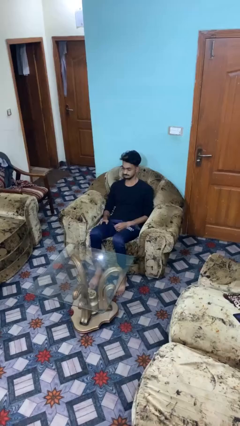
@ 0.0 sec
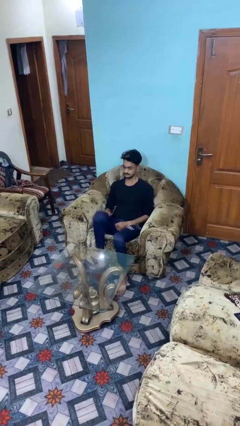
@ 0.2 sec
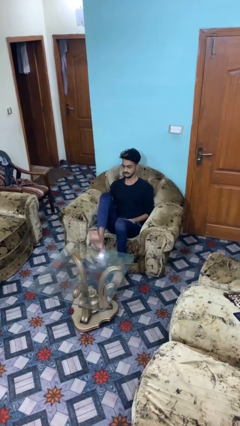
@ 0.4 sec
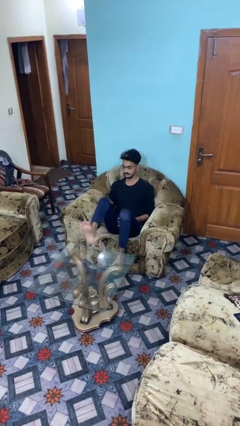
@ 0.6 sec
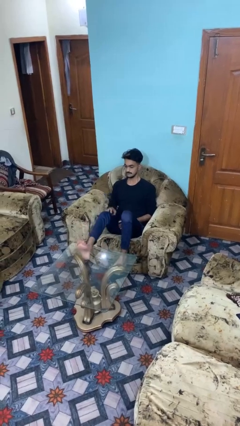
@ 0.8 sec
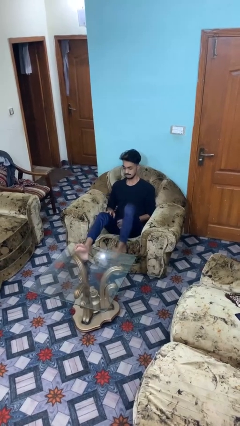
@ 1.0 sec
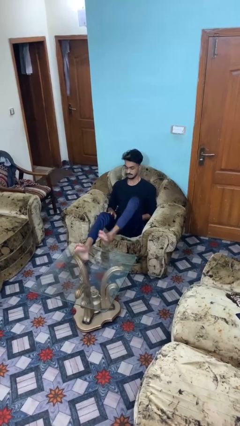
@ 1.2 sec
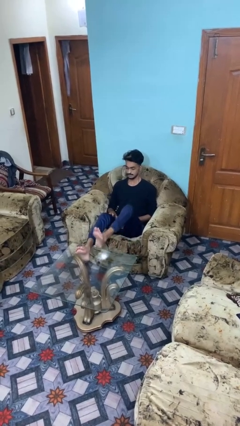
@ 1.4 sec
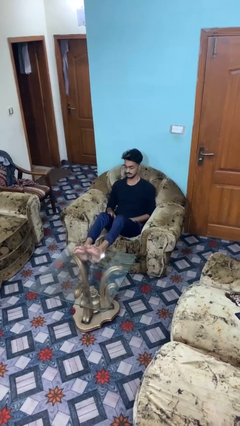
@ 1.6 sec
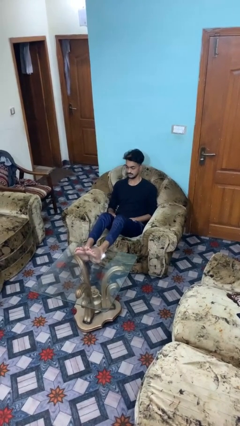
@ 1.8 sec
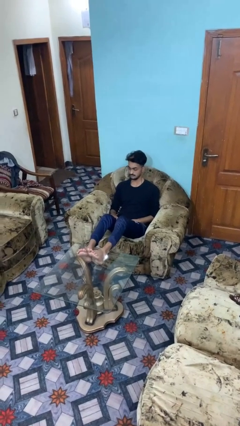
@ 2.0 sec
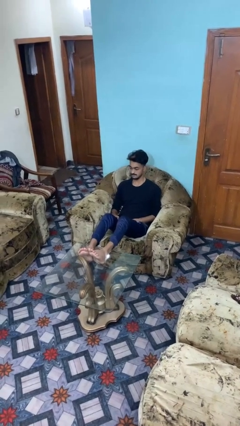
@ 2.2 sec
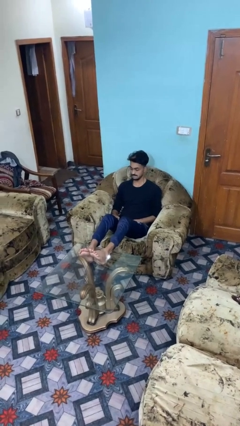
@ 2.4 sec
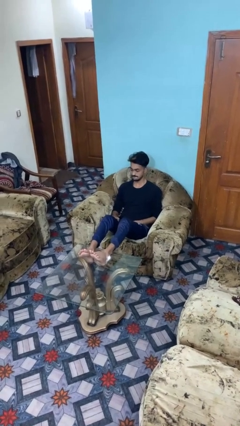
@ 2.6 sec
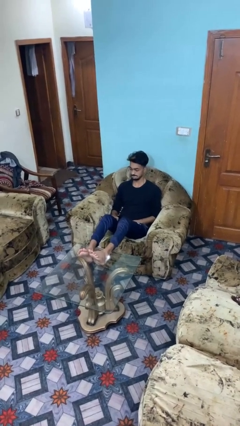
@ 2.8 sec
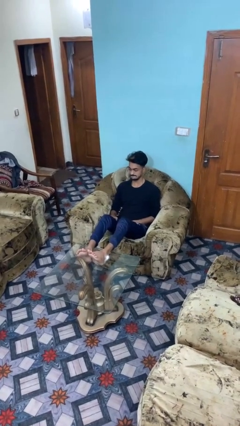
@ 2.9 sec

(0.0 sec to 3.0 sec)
person puts feet up

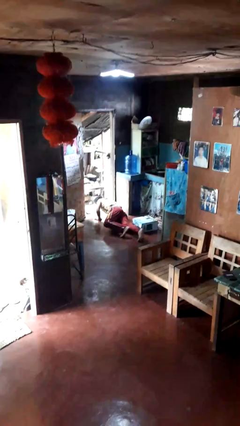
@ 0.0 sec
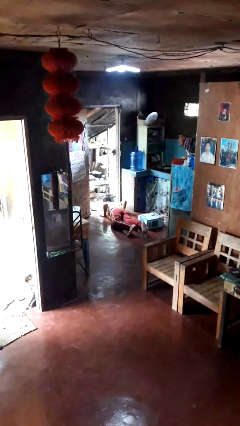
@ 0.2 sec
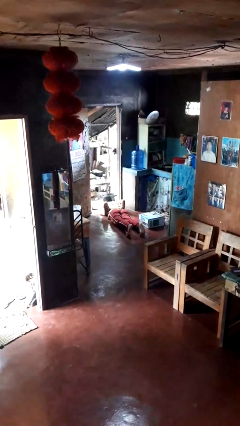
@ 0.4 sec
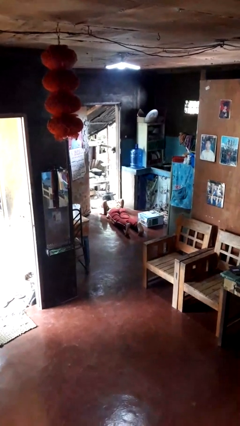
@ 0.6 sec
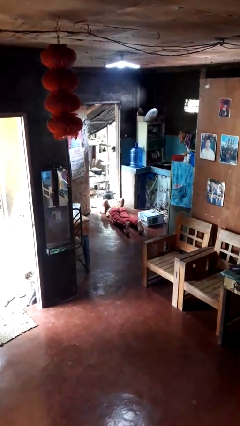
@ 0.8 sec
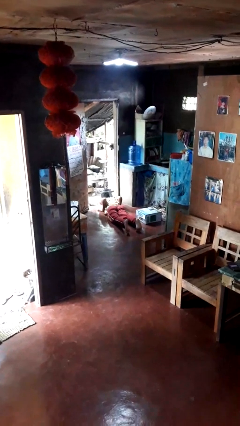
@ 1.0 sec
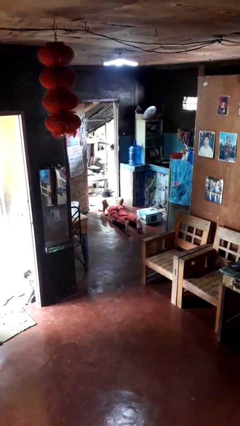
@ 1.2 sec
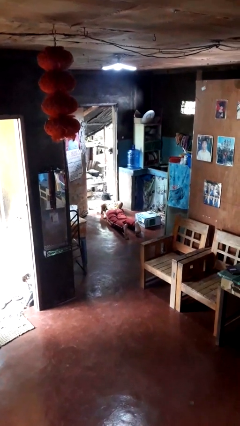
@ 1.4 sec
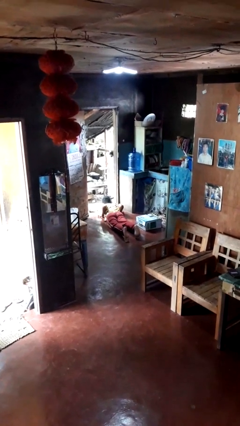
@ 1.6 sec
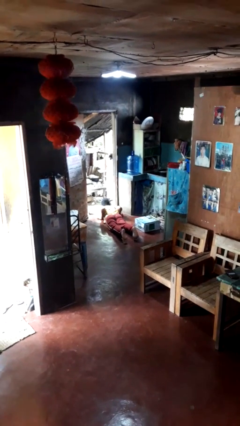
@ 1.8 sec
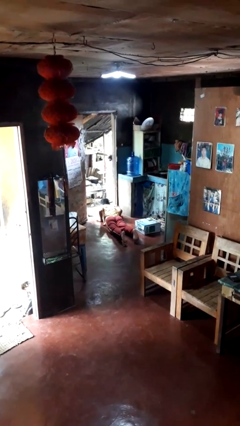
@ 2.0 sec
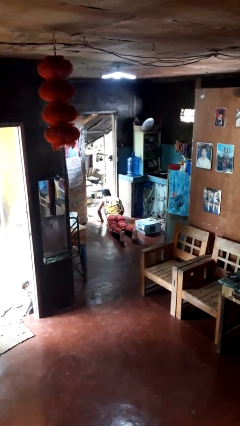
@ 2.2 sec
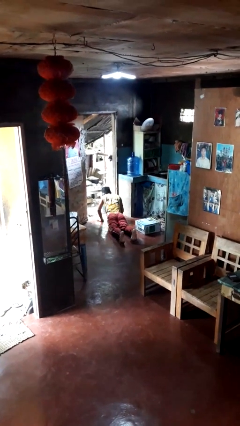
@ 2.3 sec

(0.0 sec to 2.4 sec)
person lies down on floor

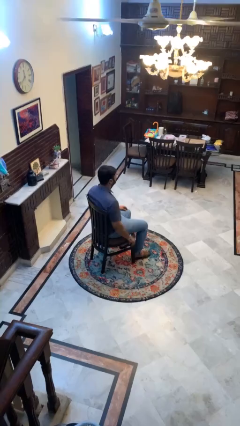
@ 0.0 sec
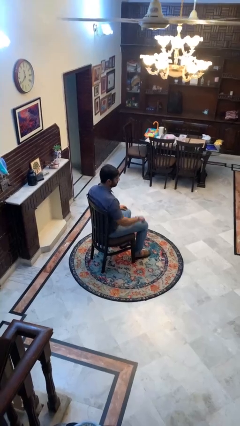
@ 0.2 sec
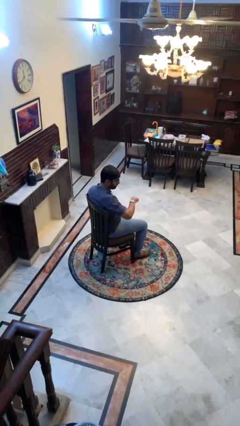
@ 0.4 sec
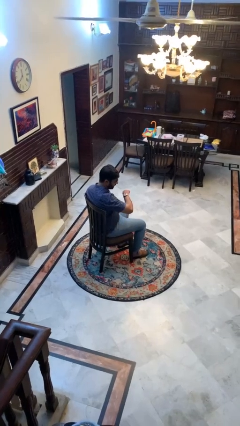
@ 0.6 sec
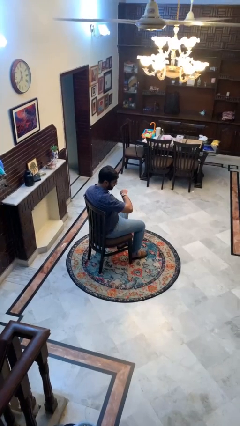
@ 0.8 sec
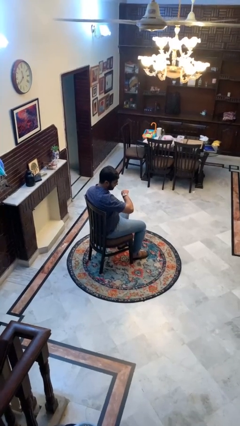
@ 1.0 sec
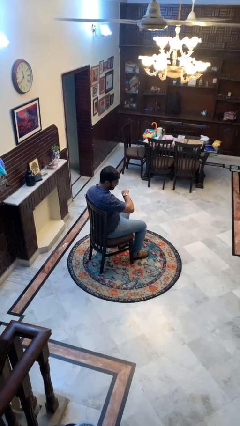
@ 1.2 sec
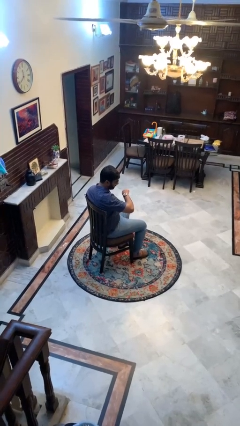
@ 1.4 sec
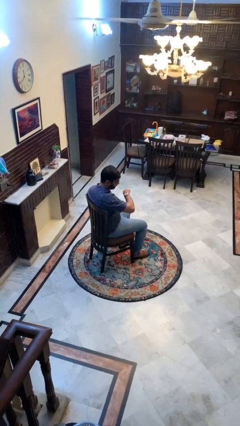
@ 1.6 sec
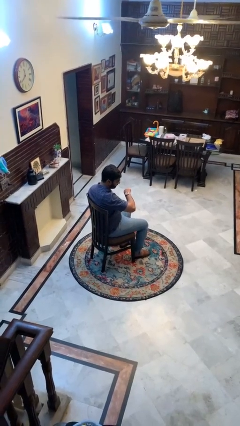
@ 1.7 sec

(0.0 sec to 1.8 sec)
person looks at wristwatch

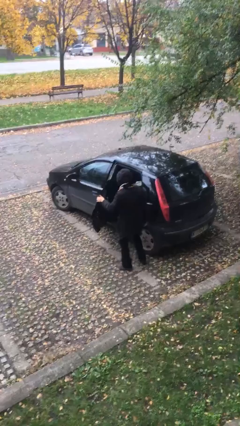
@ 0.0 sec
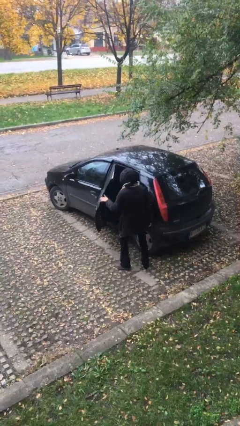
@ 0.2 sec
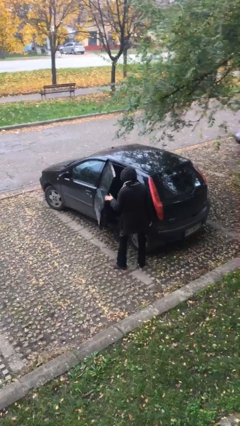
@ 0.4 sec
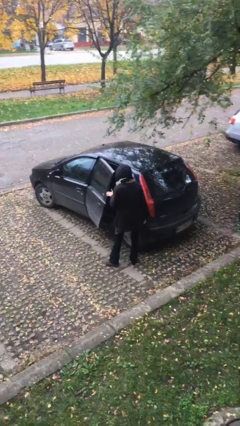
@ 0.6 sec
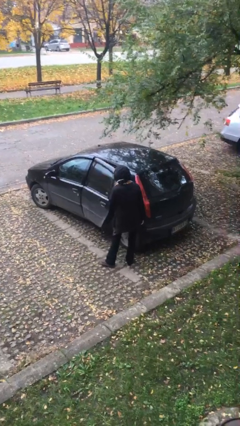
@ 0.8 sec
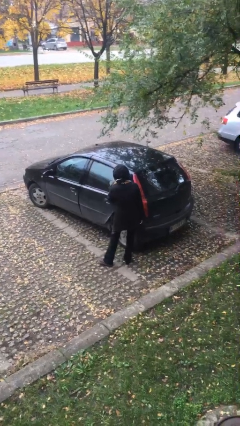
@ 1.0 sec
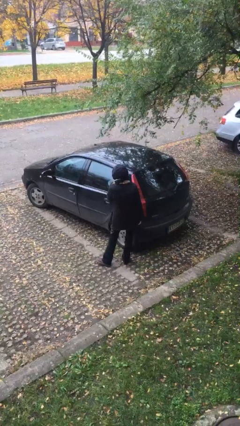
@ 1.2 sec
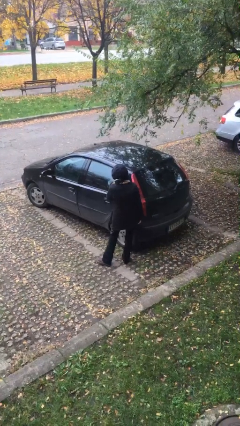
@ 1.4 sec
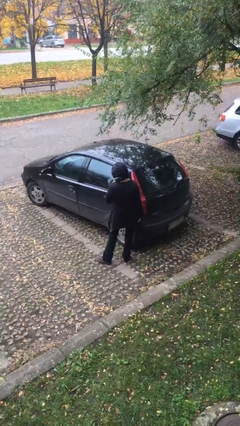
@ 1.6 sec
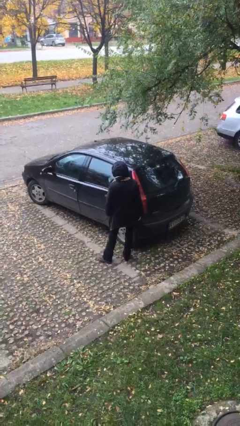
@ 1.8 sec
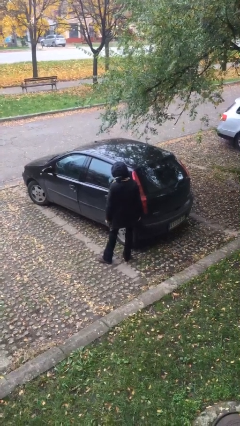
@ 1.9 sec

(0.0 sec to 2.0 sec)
person closes car door

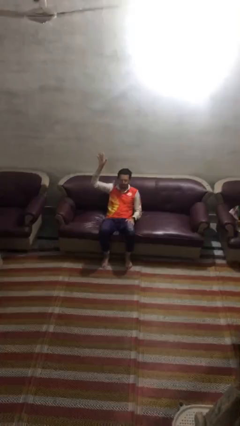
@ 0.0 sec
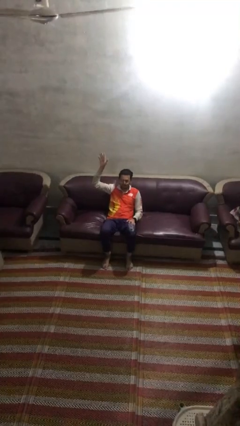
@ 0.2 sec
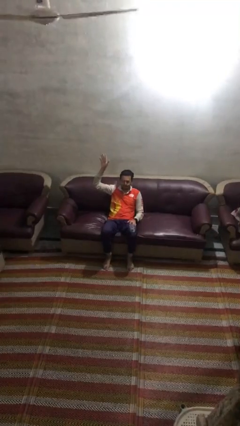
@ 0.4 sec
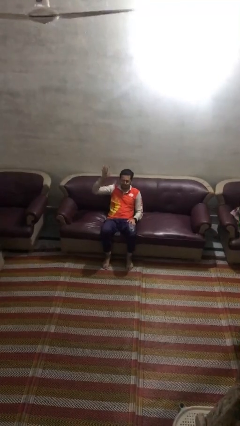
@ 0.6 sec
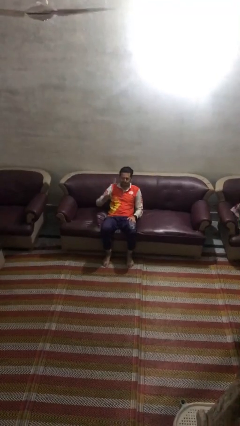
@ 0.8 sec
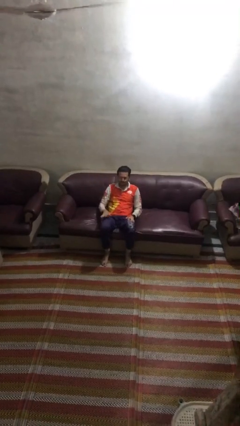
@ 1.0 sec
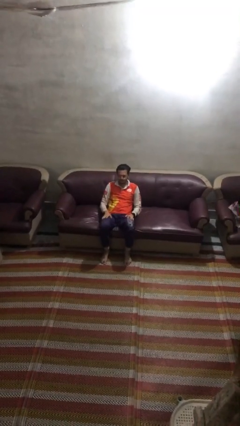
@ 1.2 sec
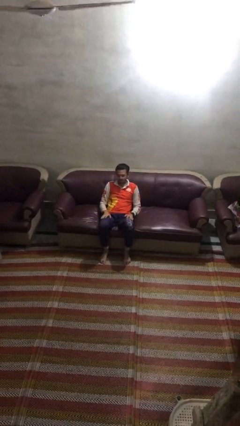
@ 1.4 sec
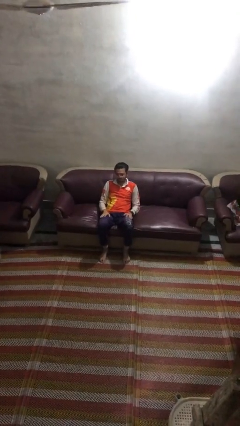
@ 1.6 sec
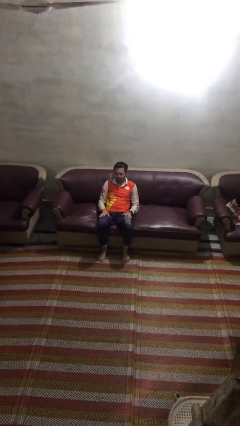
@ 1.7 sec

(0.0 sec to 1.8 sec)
person gestures lower hand

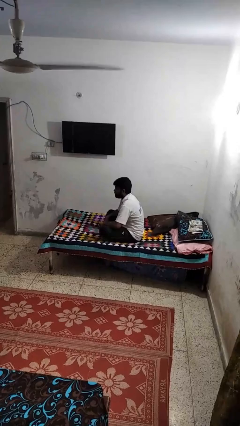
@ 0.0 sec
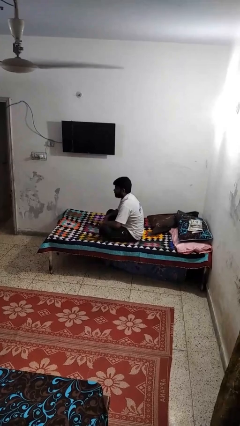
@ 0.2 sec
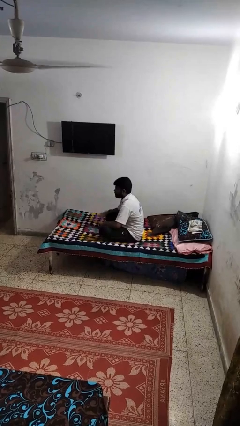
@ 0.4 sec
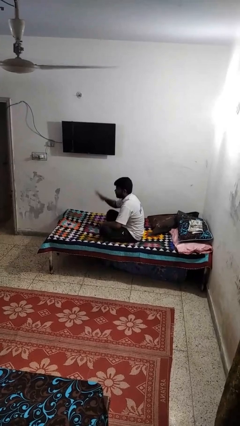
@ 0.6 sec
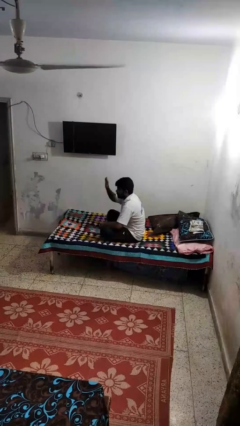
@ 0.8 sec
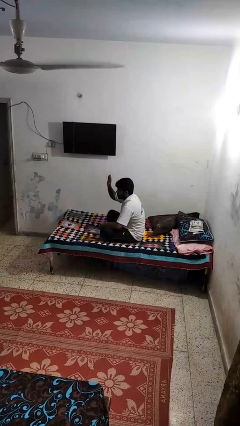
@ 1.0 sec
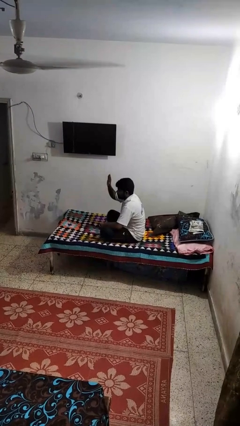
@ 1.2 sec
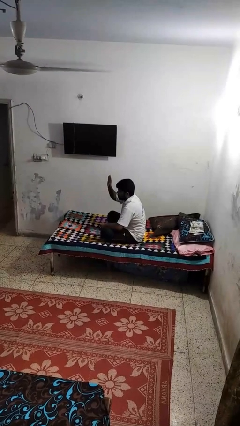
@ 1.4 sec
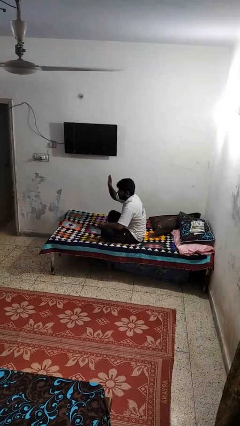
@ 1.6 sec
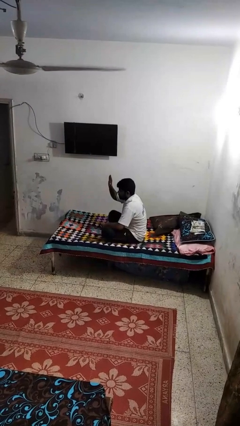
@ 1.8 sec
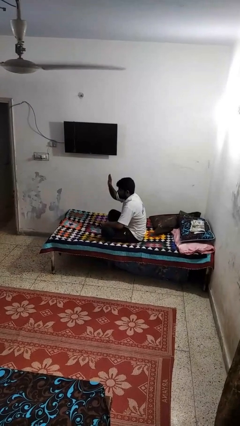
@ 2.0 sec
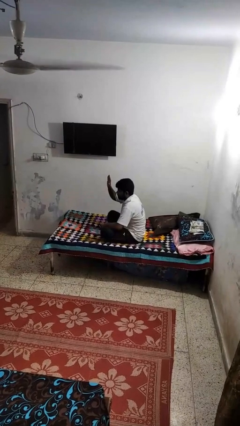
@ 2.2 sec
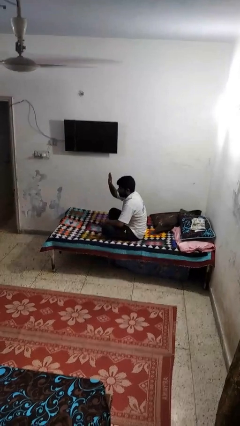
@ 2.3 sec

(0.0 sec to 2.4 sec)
person gestures raise hand

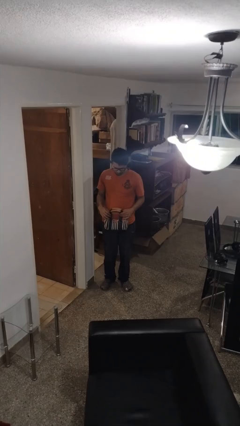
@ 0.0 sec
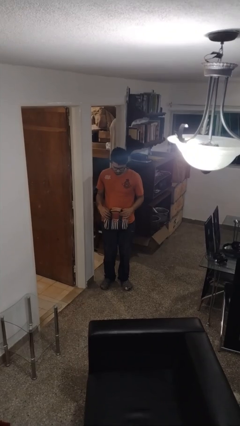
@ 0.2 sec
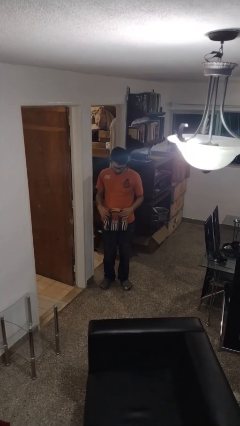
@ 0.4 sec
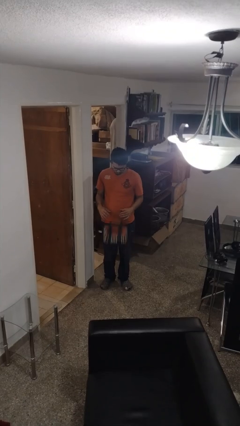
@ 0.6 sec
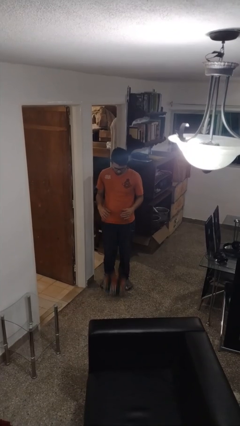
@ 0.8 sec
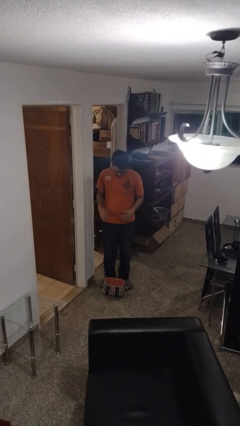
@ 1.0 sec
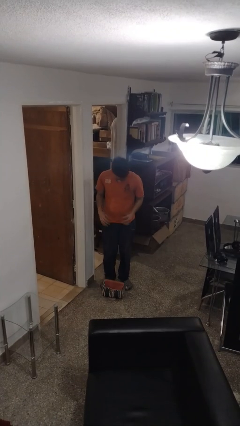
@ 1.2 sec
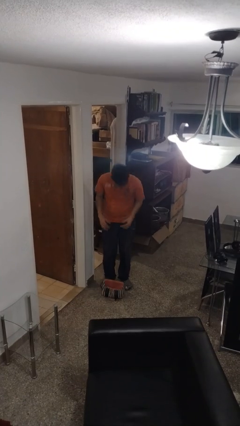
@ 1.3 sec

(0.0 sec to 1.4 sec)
person drops object

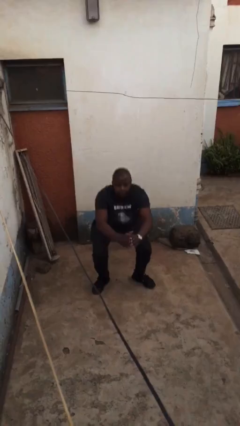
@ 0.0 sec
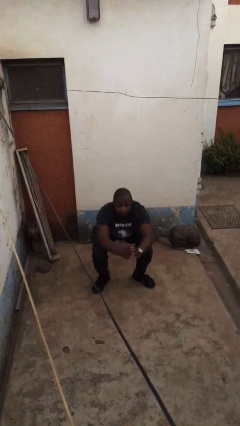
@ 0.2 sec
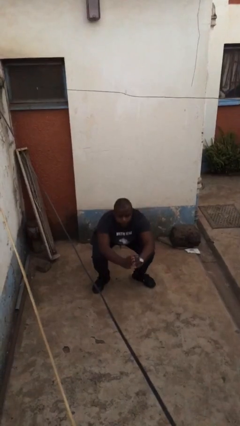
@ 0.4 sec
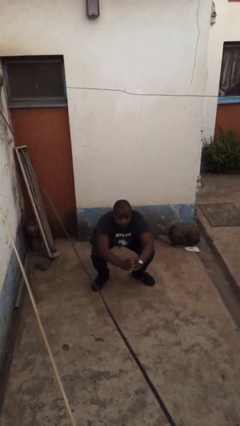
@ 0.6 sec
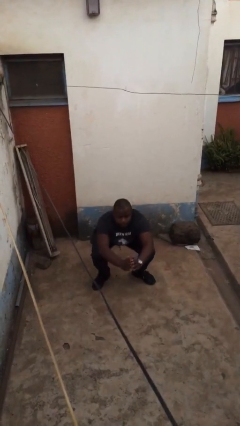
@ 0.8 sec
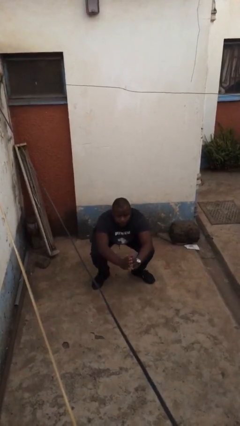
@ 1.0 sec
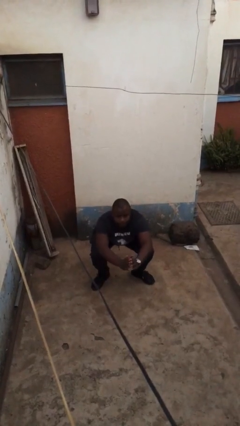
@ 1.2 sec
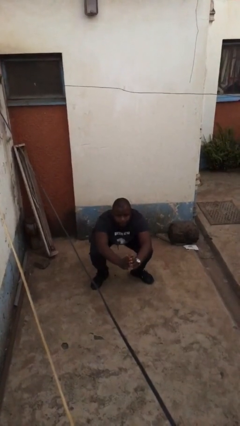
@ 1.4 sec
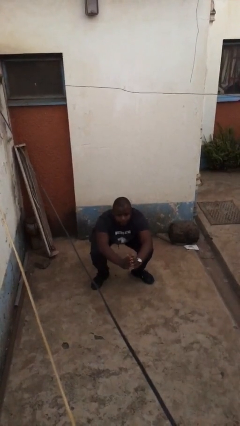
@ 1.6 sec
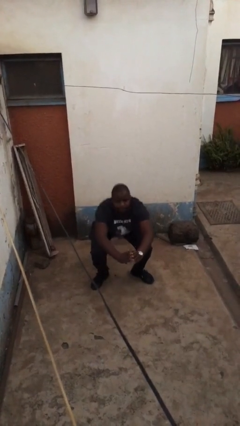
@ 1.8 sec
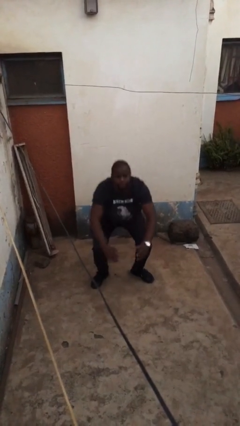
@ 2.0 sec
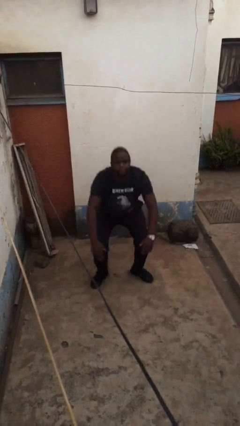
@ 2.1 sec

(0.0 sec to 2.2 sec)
person squats
